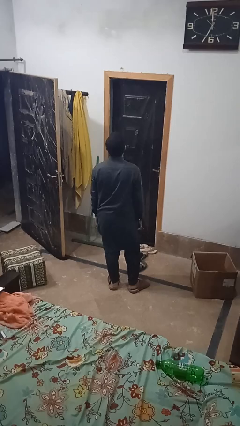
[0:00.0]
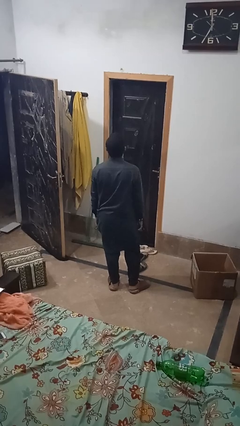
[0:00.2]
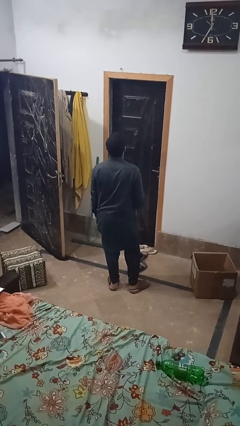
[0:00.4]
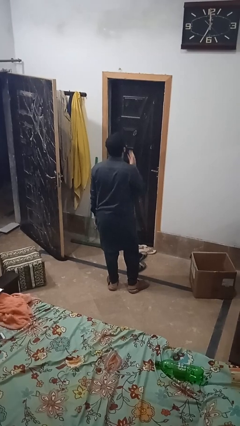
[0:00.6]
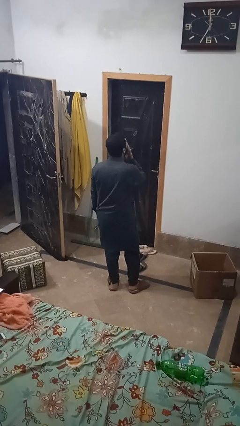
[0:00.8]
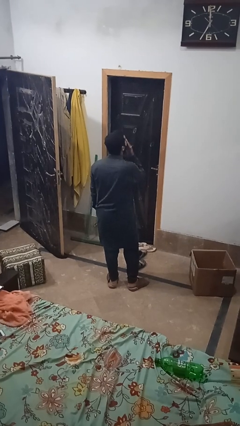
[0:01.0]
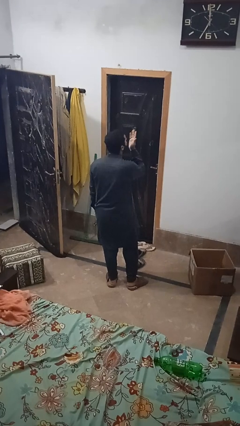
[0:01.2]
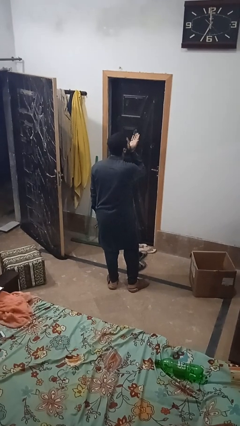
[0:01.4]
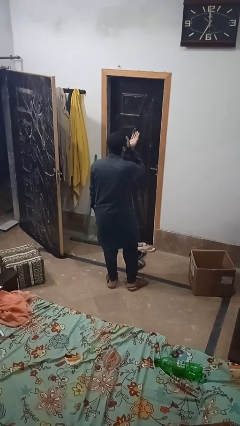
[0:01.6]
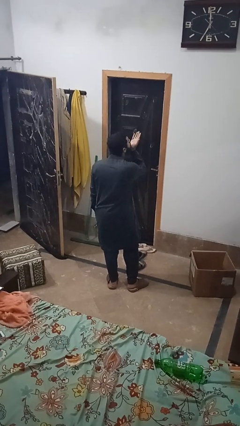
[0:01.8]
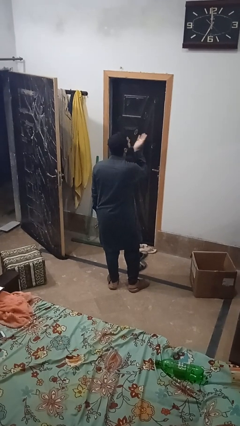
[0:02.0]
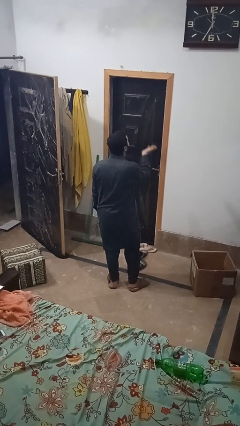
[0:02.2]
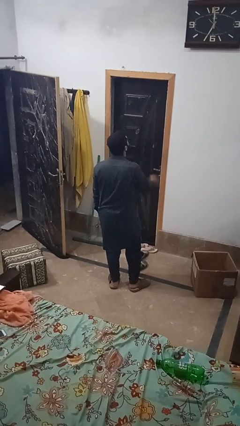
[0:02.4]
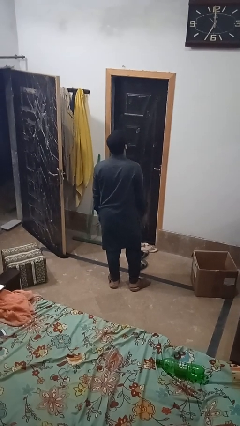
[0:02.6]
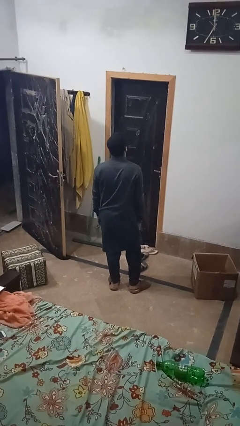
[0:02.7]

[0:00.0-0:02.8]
person gestures blow kiss

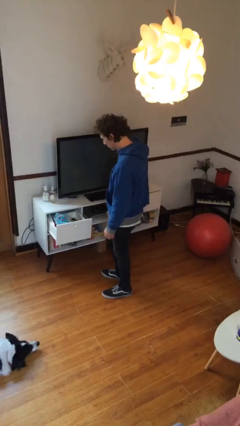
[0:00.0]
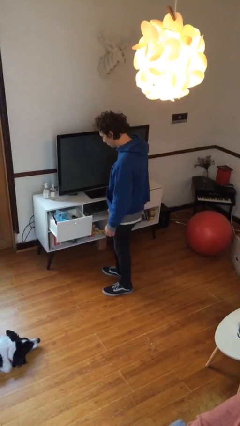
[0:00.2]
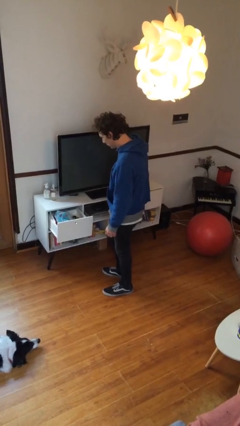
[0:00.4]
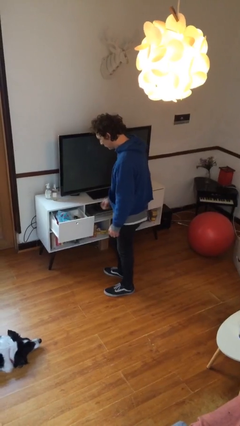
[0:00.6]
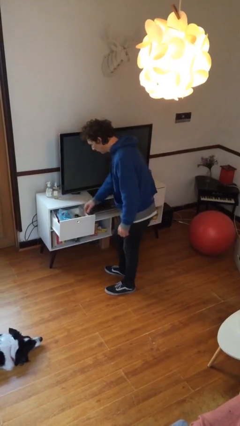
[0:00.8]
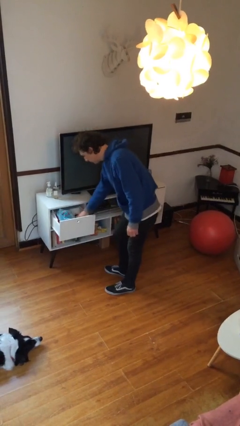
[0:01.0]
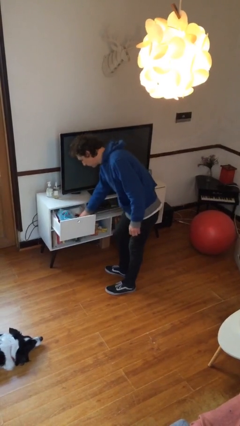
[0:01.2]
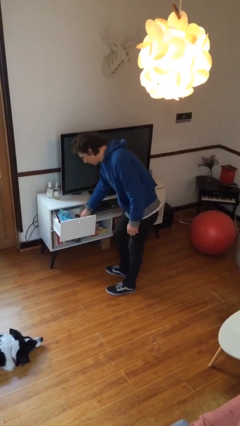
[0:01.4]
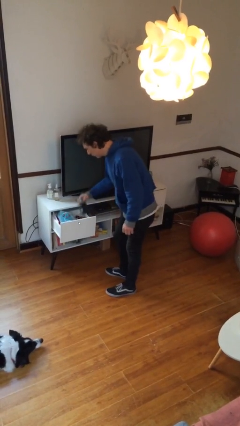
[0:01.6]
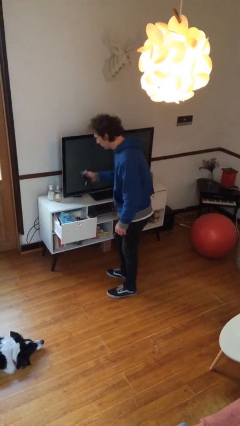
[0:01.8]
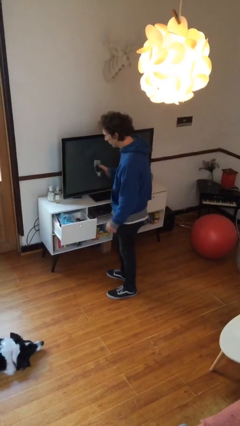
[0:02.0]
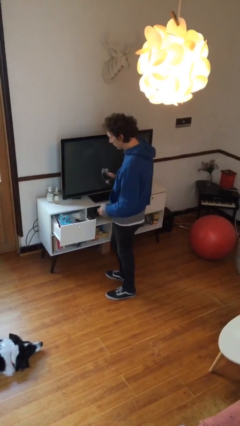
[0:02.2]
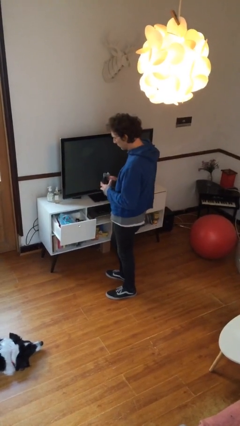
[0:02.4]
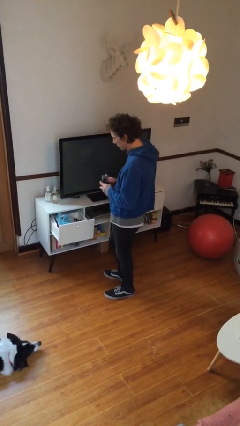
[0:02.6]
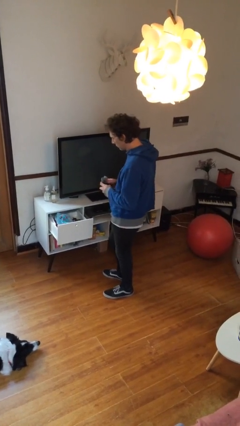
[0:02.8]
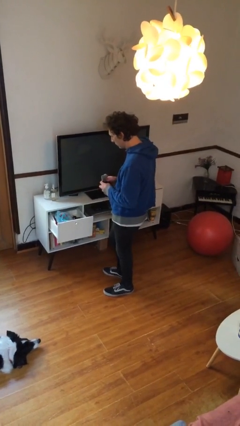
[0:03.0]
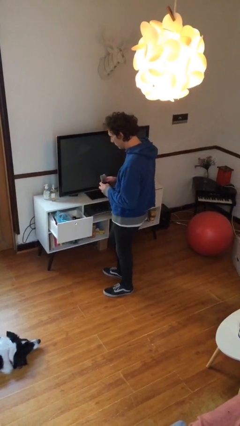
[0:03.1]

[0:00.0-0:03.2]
person takes clothes from dresser

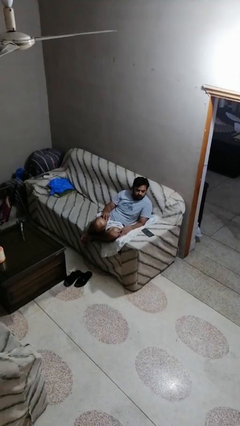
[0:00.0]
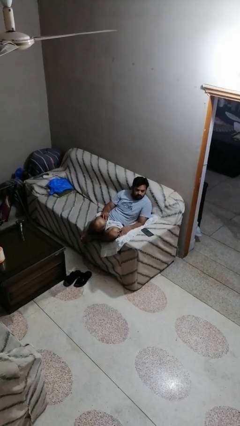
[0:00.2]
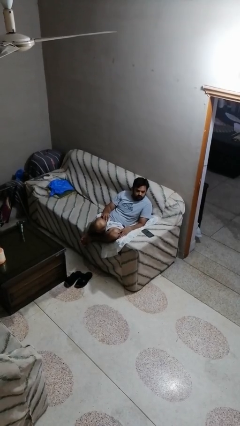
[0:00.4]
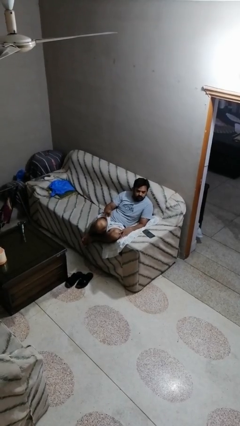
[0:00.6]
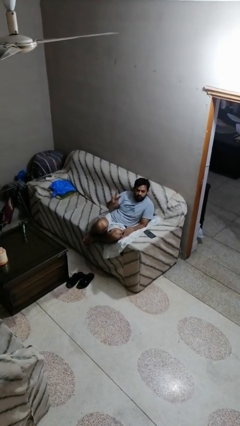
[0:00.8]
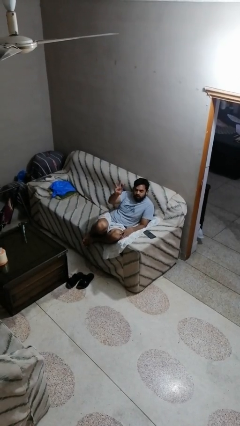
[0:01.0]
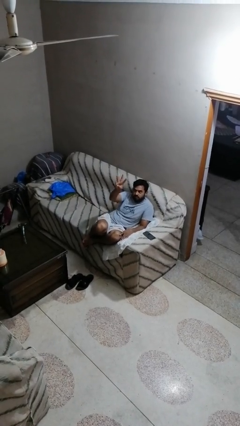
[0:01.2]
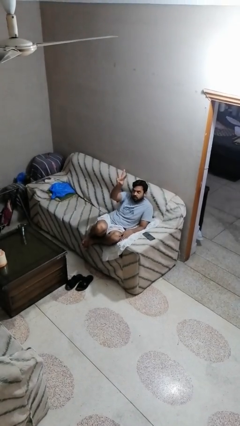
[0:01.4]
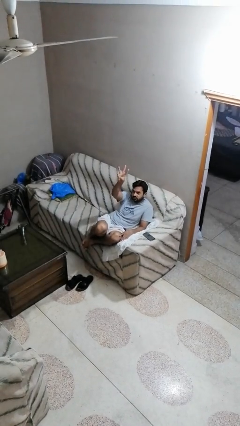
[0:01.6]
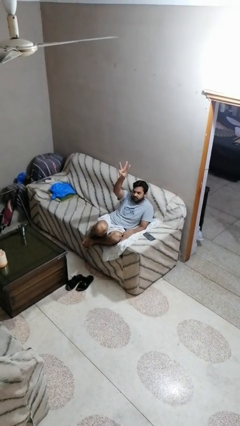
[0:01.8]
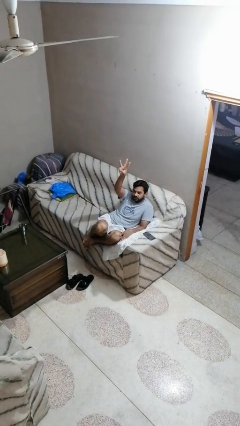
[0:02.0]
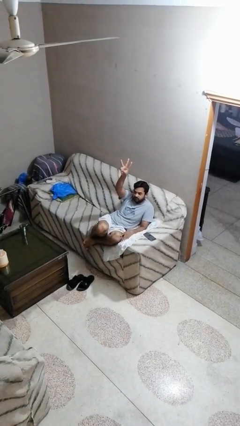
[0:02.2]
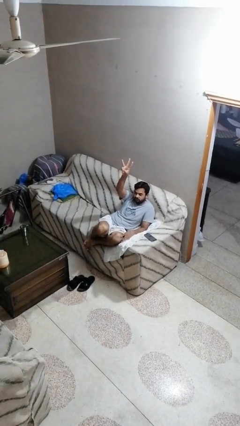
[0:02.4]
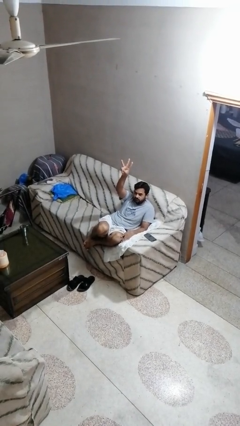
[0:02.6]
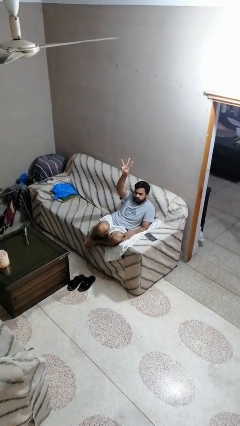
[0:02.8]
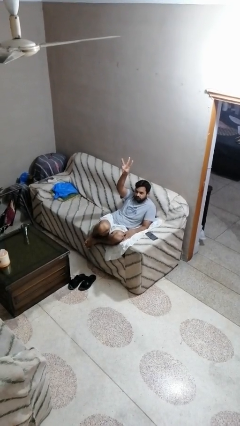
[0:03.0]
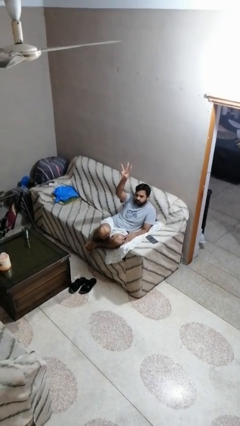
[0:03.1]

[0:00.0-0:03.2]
person gestures number three

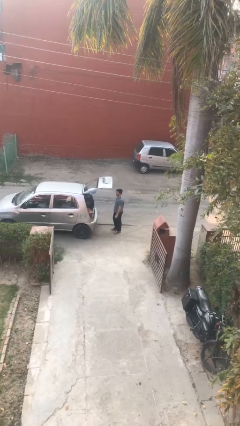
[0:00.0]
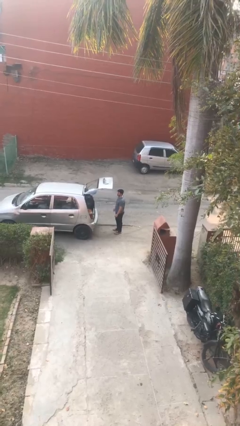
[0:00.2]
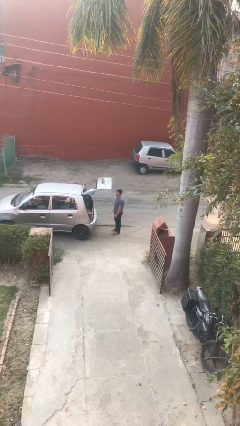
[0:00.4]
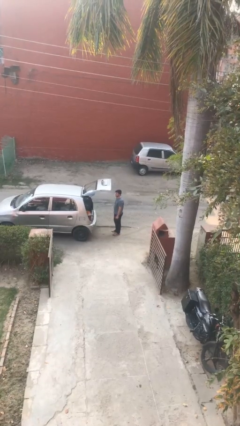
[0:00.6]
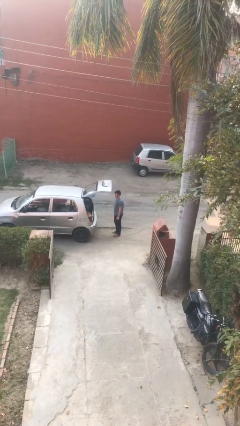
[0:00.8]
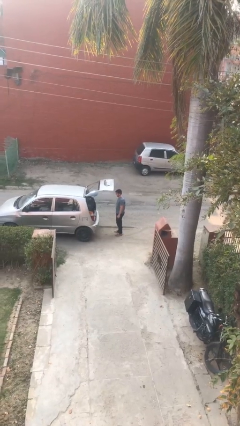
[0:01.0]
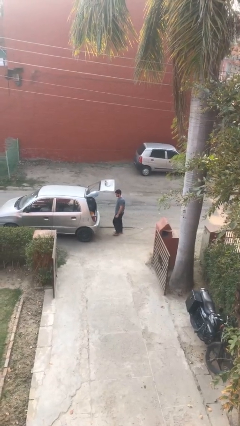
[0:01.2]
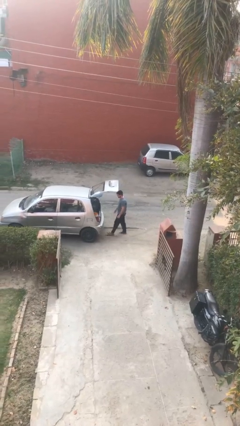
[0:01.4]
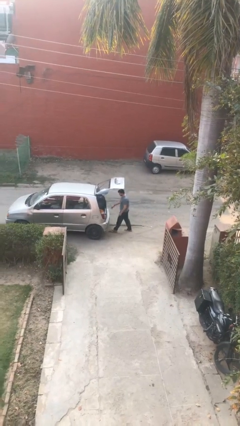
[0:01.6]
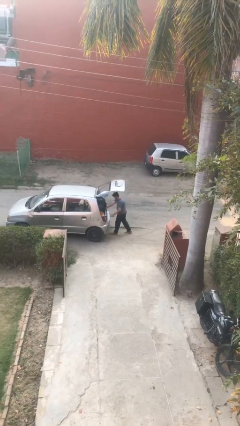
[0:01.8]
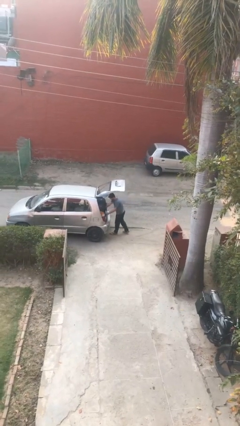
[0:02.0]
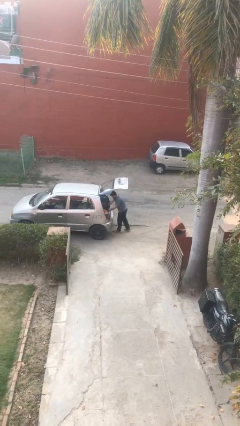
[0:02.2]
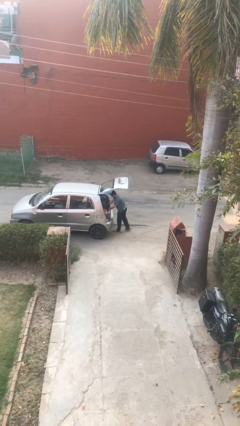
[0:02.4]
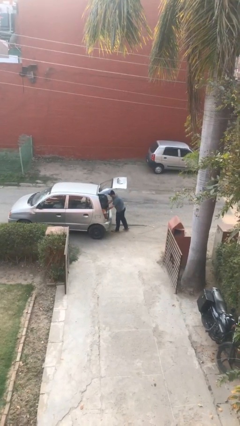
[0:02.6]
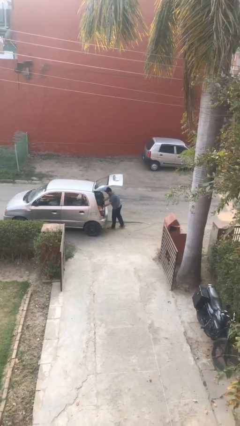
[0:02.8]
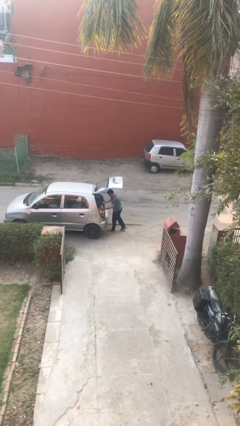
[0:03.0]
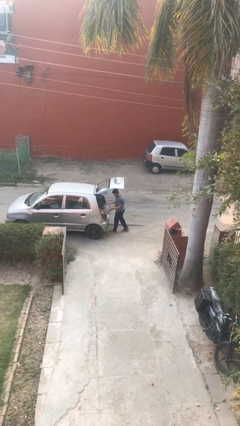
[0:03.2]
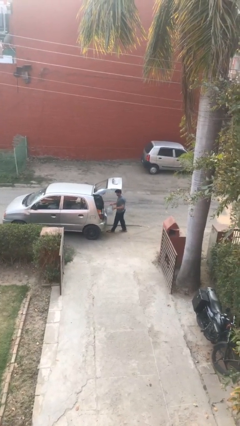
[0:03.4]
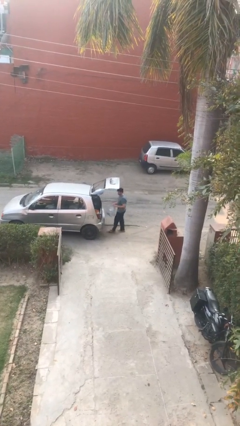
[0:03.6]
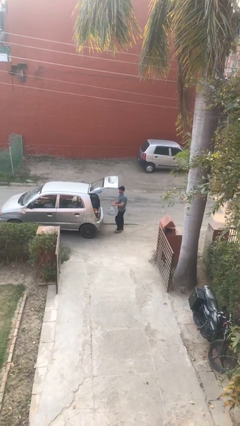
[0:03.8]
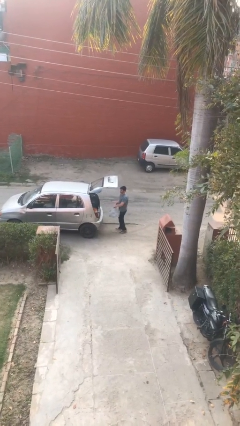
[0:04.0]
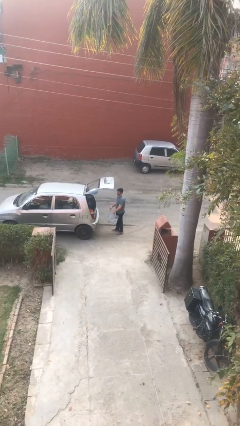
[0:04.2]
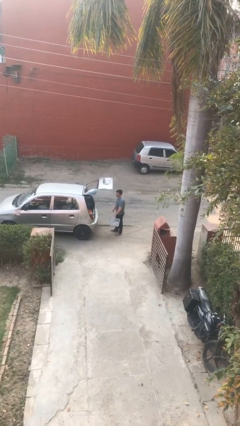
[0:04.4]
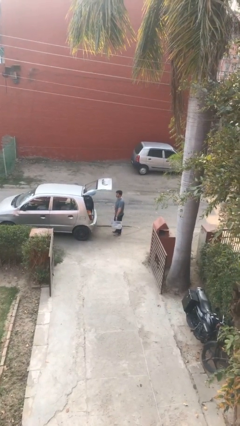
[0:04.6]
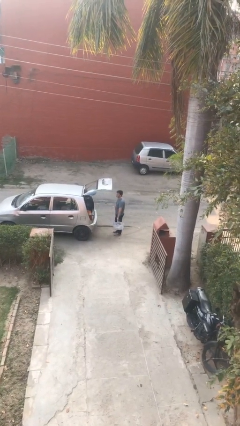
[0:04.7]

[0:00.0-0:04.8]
person unloads car

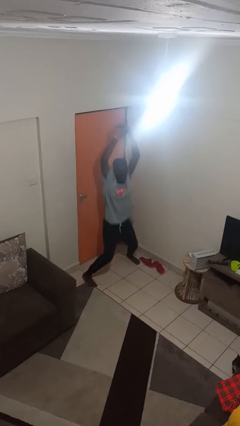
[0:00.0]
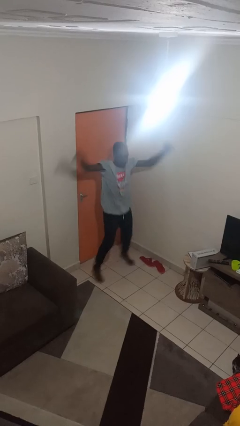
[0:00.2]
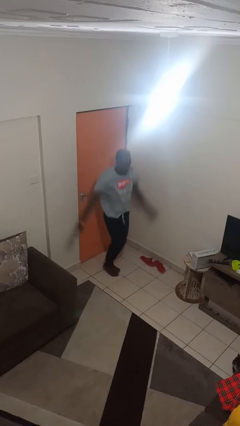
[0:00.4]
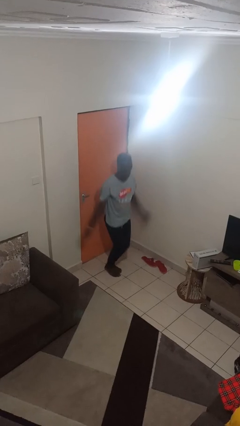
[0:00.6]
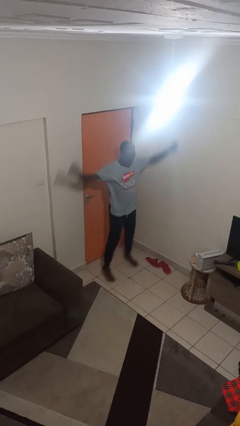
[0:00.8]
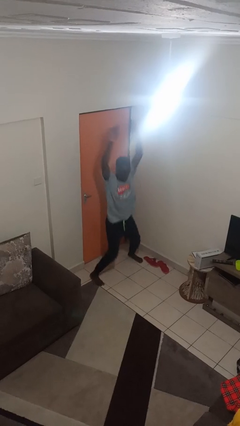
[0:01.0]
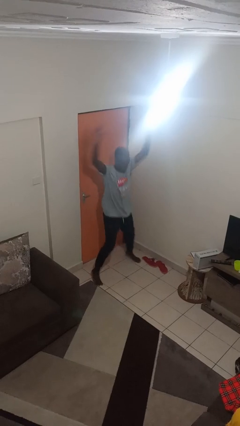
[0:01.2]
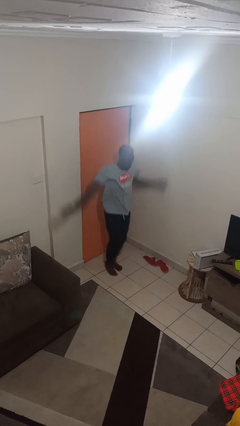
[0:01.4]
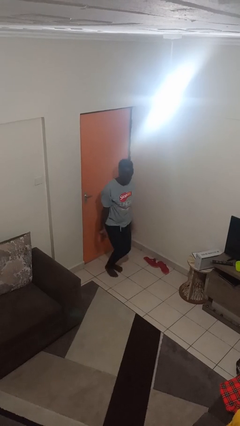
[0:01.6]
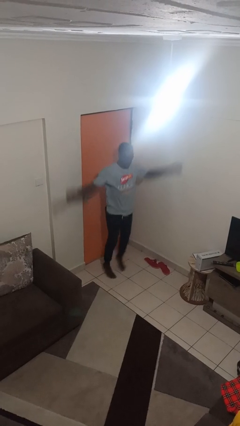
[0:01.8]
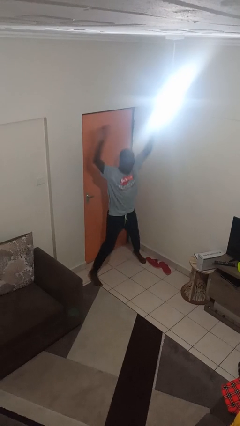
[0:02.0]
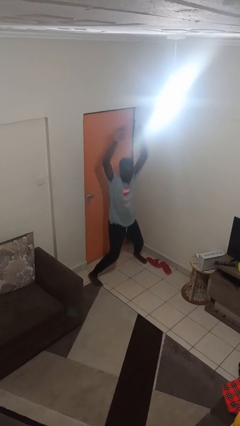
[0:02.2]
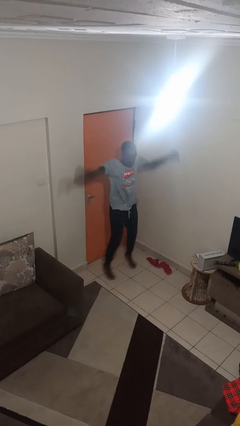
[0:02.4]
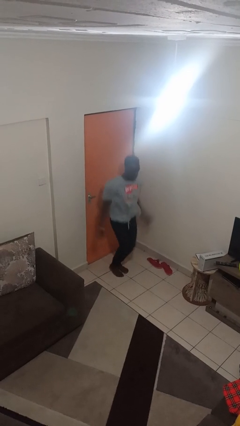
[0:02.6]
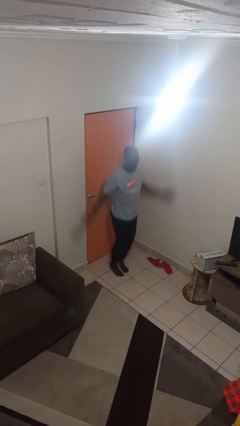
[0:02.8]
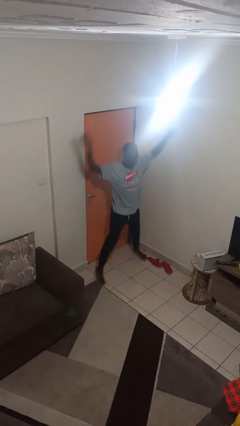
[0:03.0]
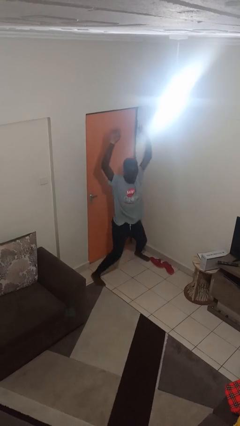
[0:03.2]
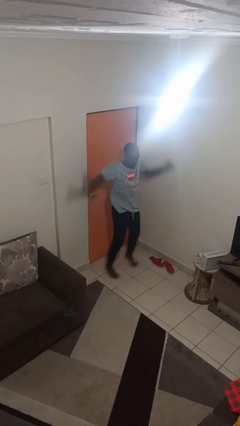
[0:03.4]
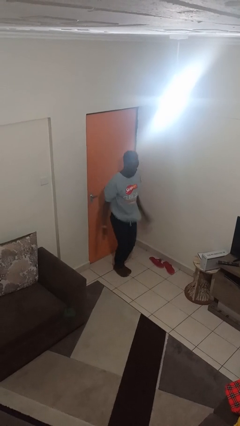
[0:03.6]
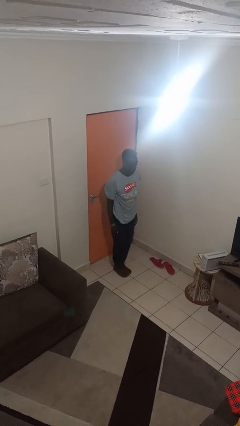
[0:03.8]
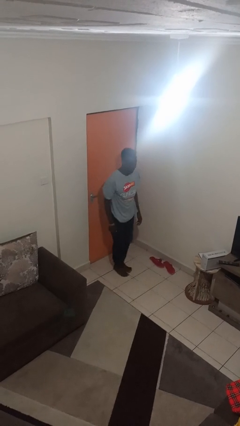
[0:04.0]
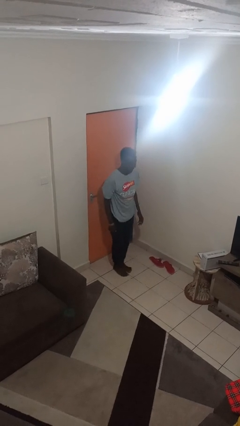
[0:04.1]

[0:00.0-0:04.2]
person exercises with jumping jacks
